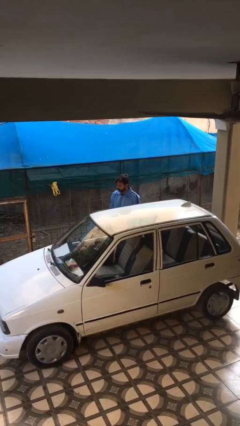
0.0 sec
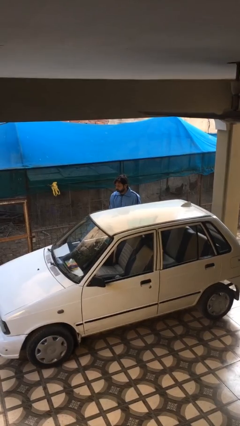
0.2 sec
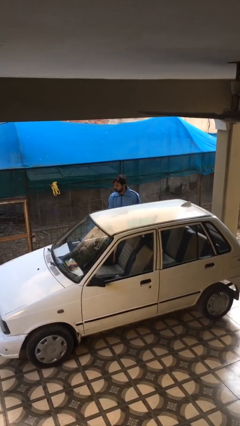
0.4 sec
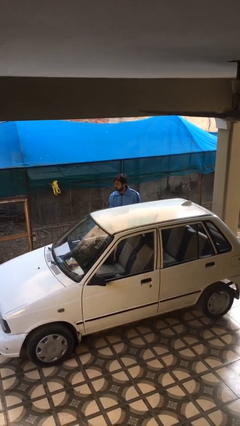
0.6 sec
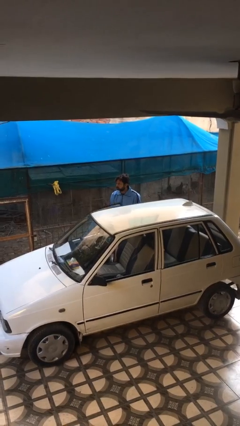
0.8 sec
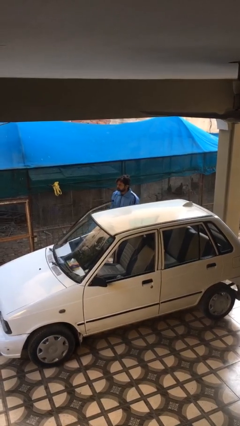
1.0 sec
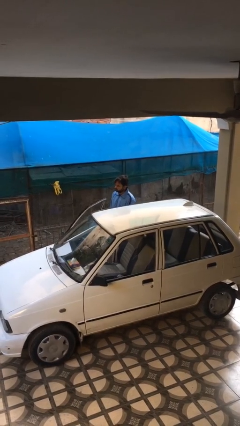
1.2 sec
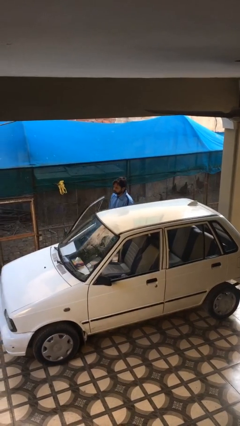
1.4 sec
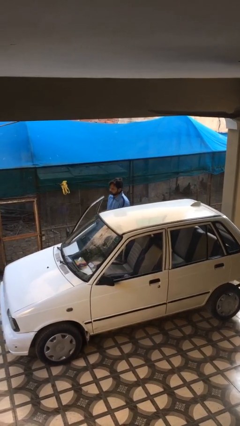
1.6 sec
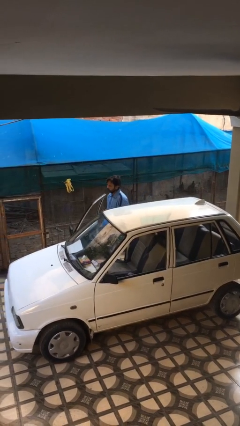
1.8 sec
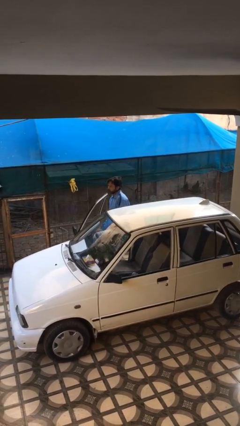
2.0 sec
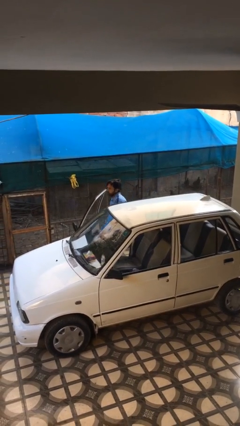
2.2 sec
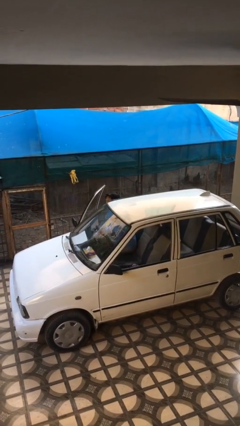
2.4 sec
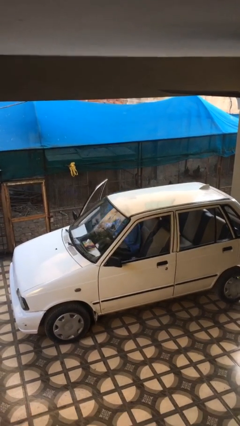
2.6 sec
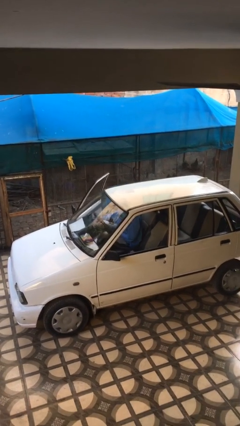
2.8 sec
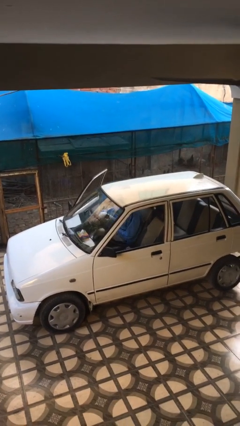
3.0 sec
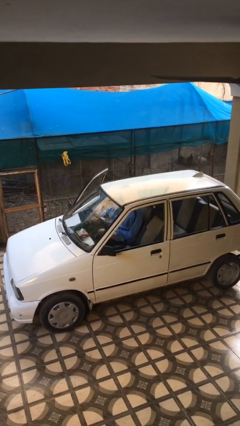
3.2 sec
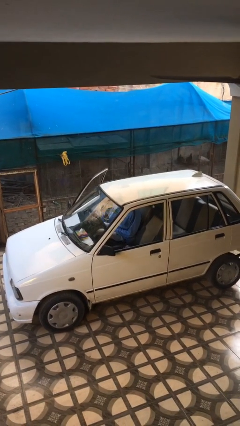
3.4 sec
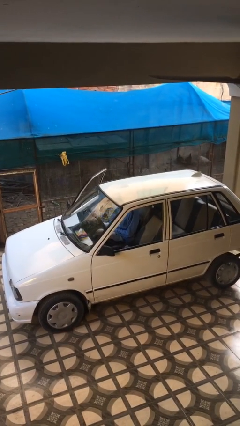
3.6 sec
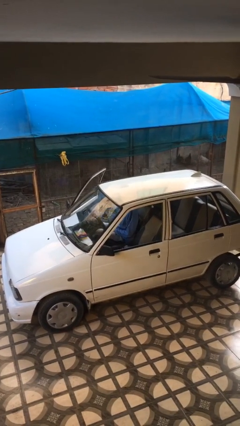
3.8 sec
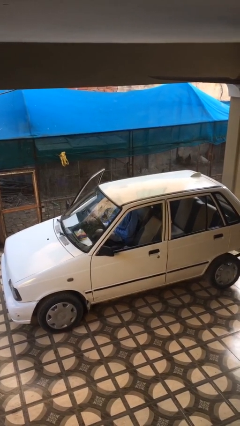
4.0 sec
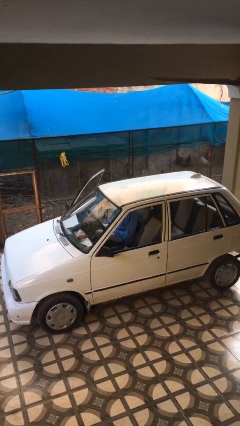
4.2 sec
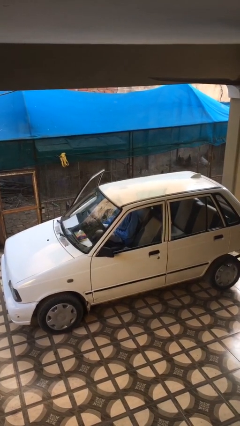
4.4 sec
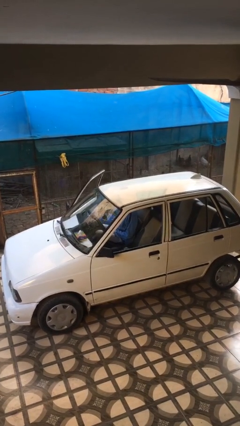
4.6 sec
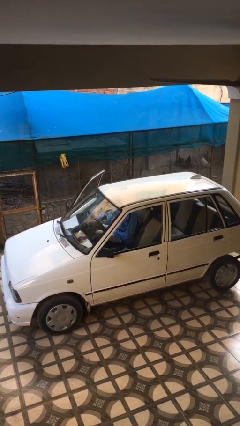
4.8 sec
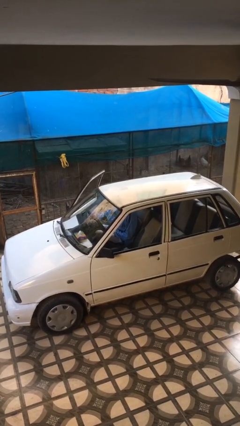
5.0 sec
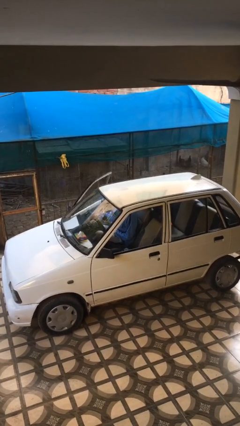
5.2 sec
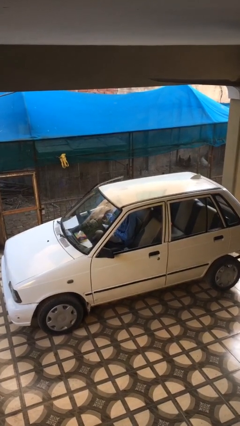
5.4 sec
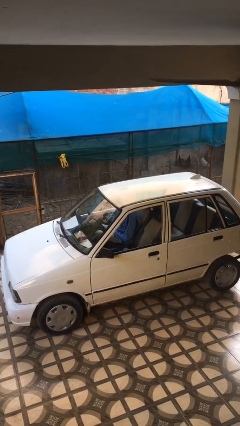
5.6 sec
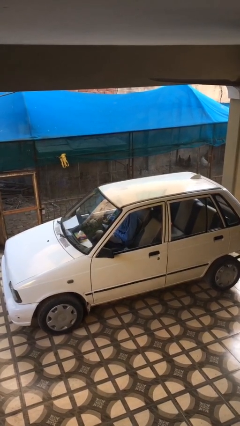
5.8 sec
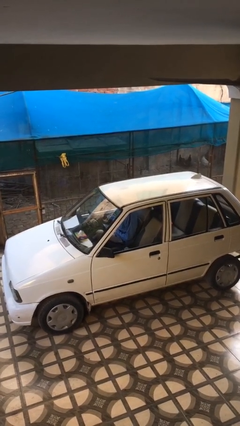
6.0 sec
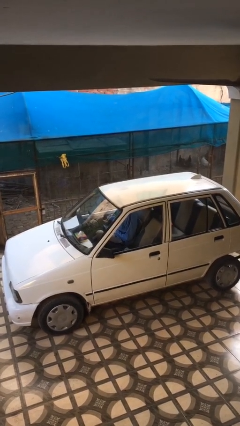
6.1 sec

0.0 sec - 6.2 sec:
person enters car

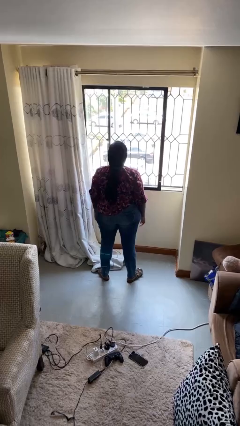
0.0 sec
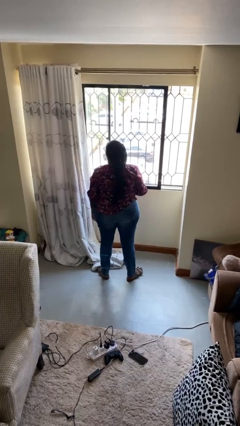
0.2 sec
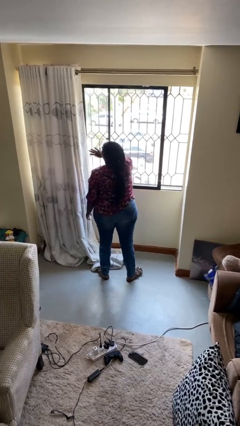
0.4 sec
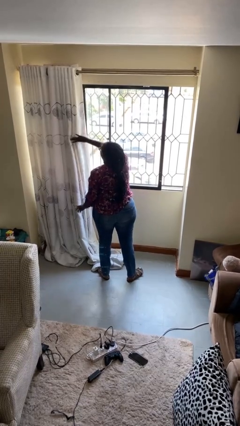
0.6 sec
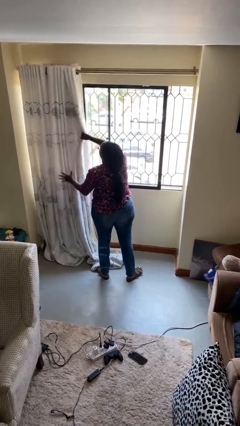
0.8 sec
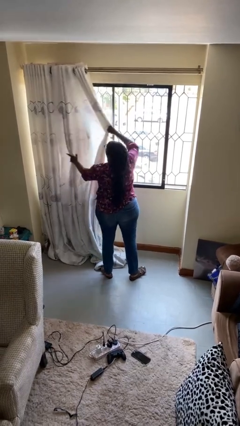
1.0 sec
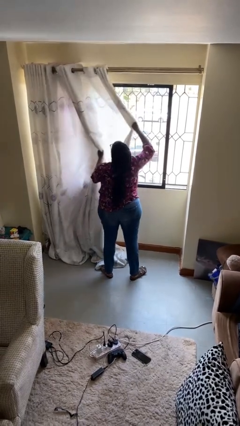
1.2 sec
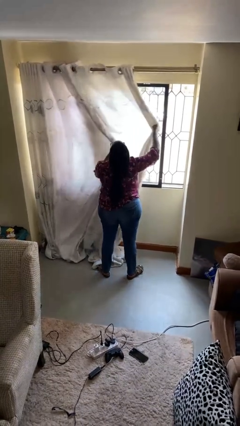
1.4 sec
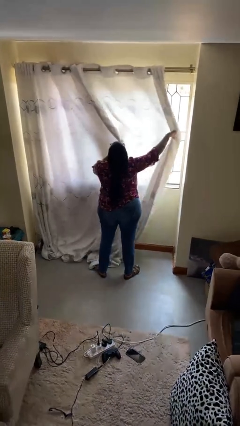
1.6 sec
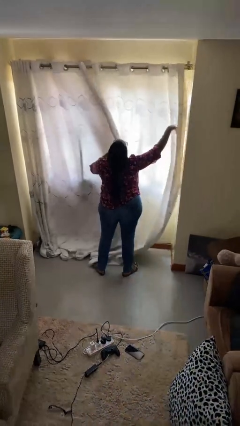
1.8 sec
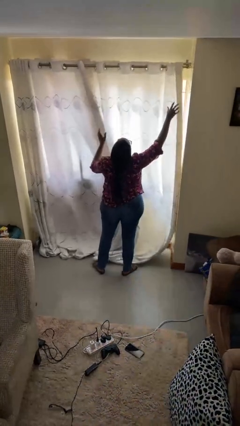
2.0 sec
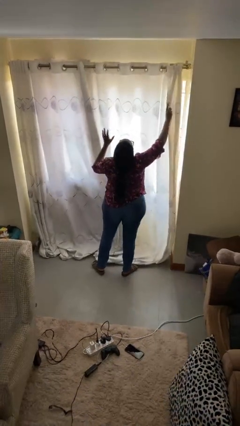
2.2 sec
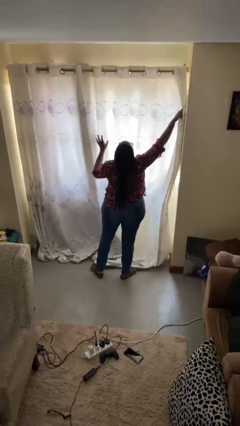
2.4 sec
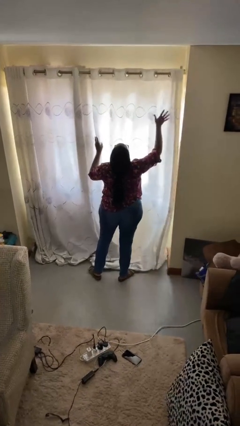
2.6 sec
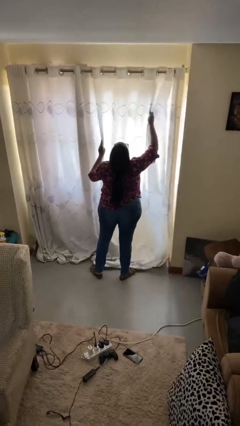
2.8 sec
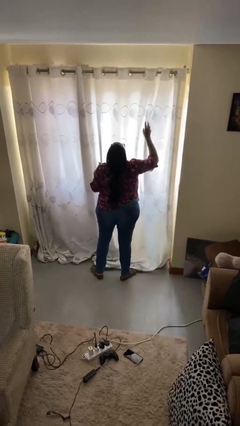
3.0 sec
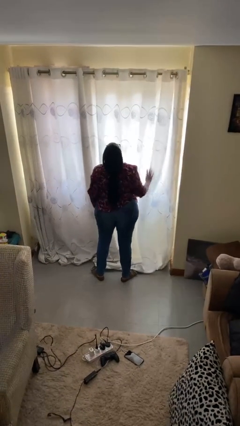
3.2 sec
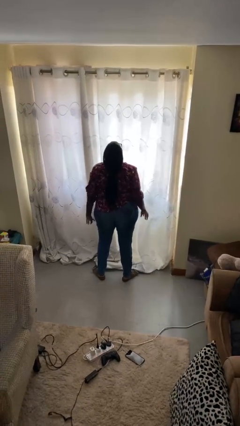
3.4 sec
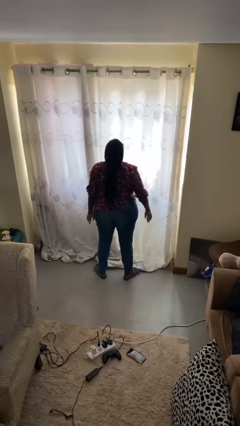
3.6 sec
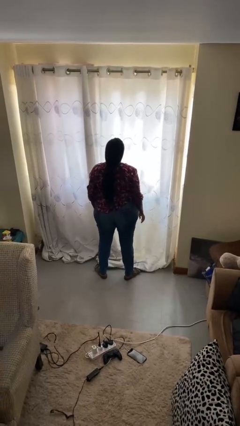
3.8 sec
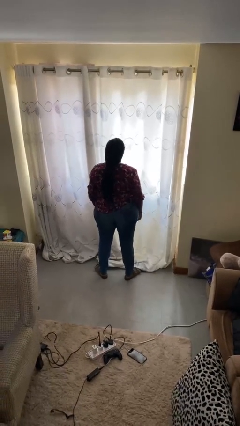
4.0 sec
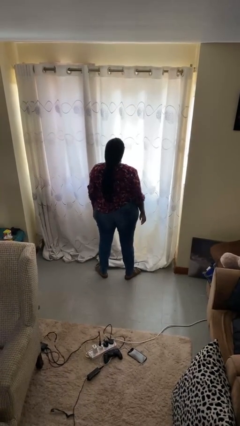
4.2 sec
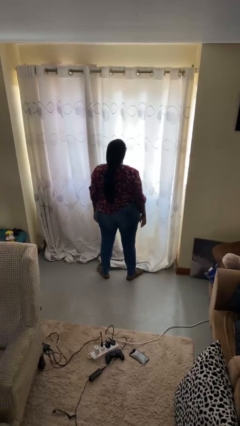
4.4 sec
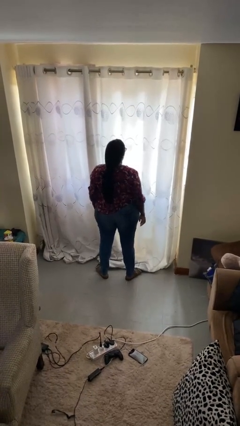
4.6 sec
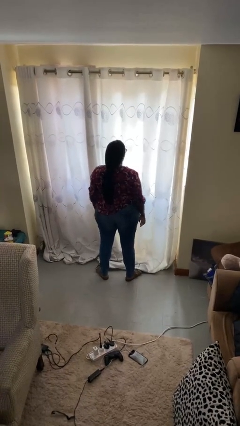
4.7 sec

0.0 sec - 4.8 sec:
person closes curtains

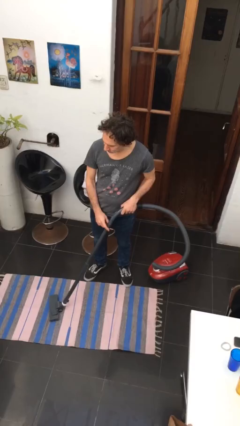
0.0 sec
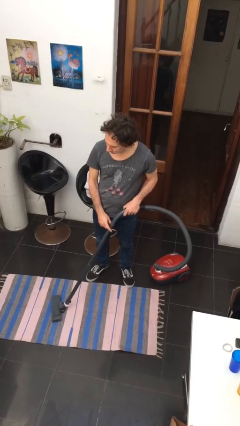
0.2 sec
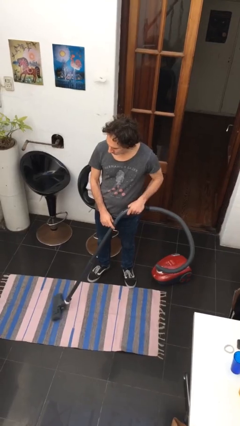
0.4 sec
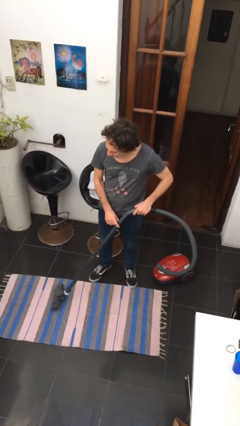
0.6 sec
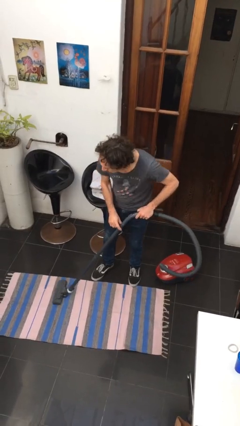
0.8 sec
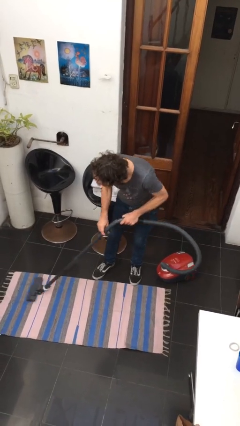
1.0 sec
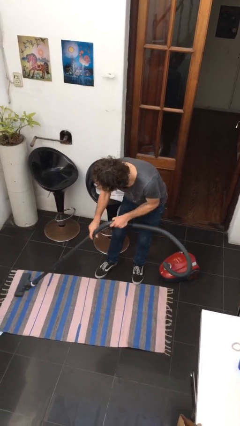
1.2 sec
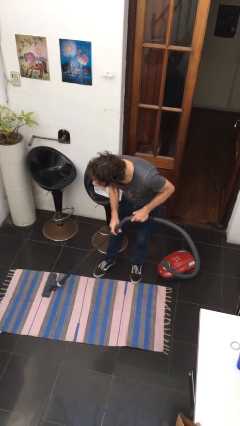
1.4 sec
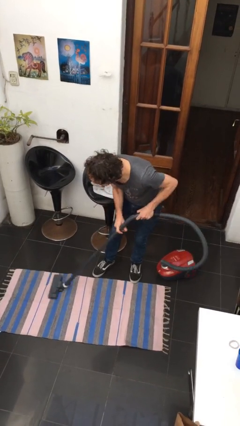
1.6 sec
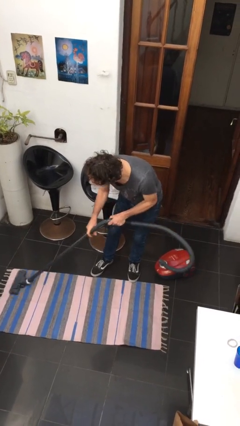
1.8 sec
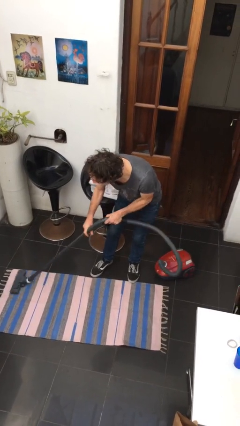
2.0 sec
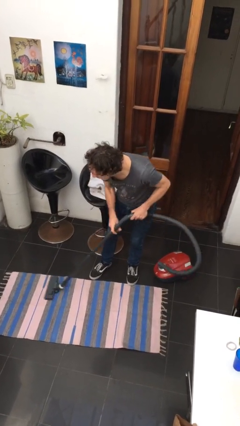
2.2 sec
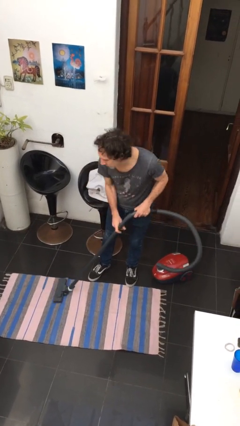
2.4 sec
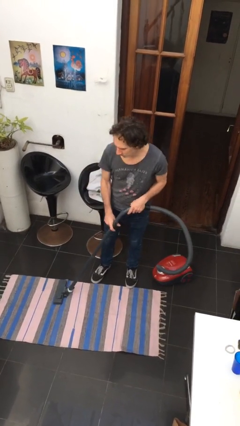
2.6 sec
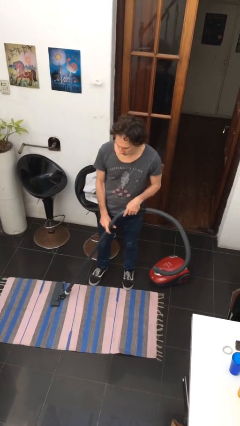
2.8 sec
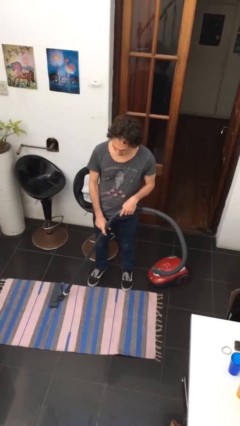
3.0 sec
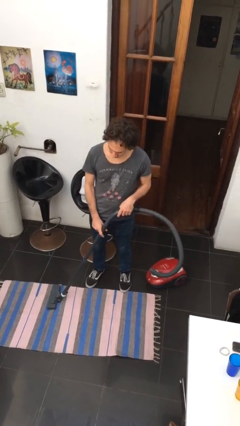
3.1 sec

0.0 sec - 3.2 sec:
person vacuums carpet

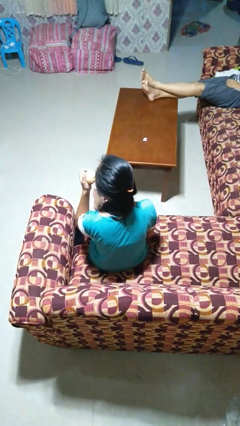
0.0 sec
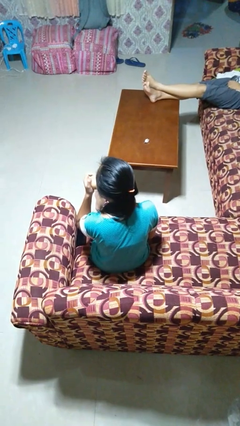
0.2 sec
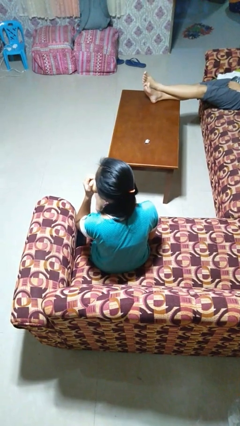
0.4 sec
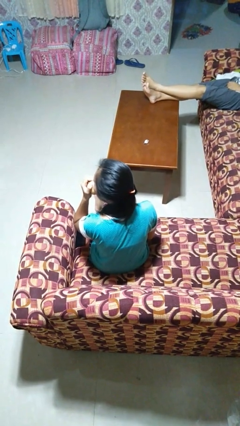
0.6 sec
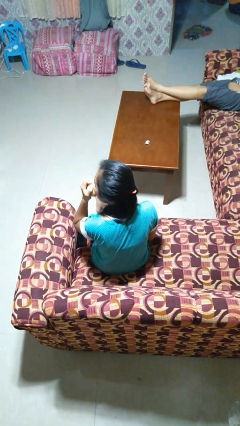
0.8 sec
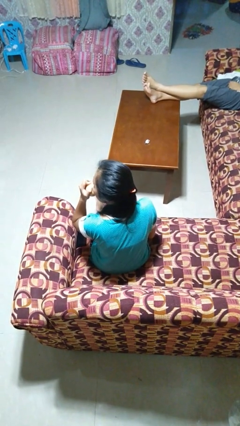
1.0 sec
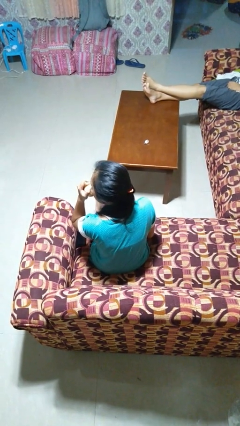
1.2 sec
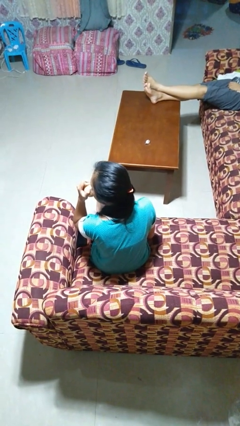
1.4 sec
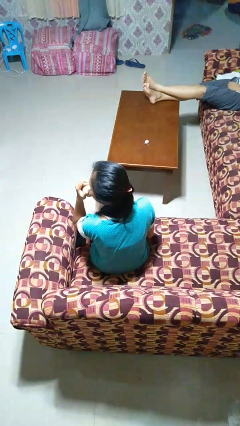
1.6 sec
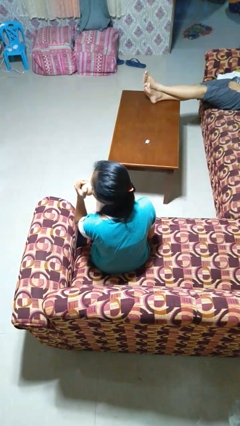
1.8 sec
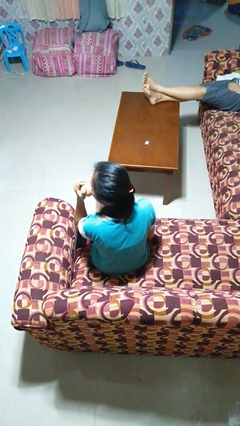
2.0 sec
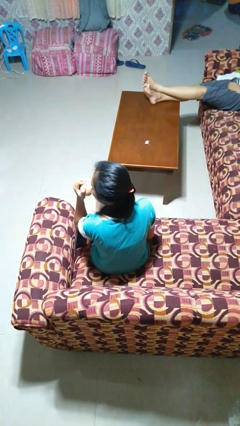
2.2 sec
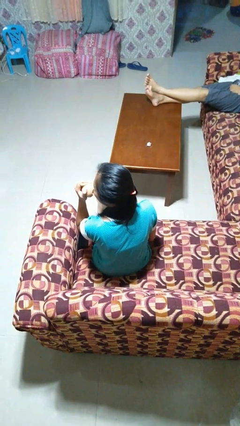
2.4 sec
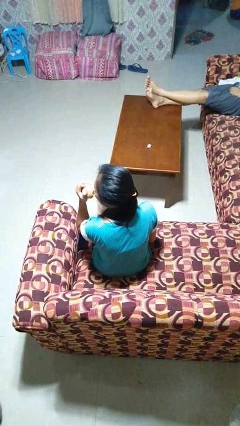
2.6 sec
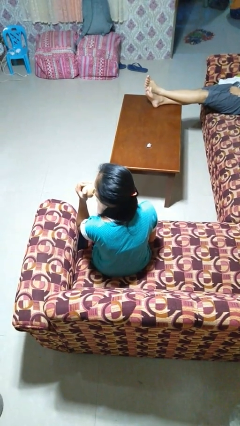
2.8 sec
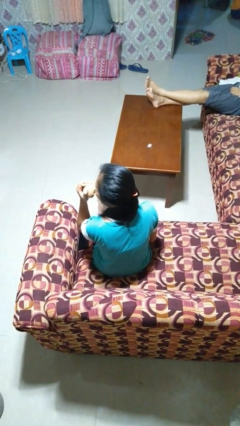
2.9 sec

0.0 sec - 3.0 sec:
person eats apple

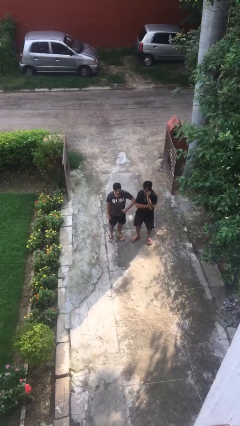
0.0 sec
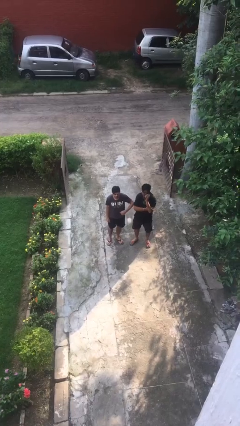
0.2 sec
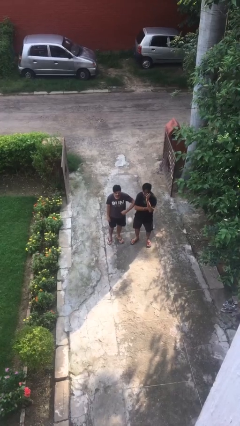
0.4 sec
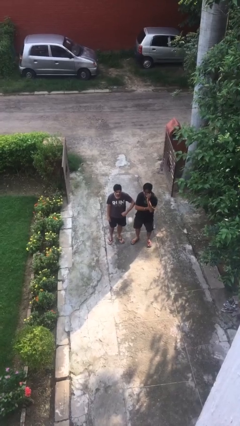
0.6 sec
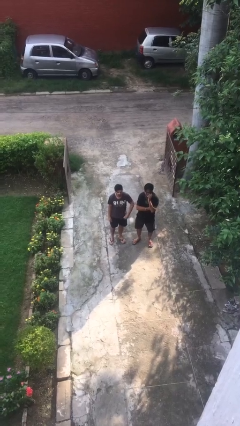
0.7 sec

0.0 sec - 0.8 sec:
person nudges person with elbow
